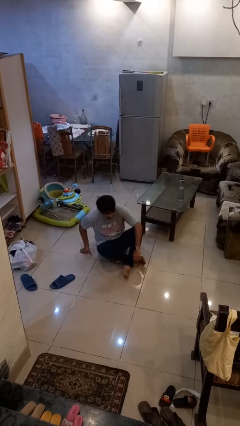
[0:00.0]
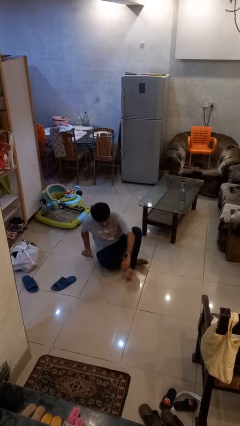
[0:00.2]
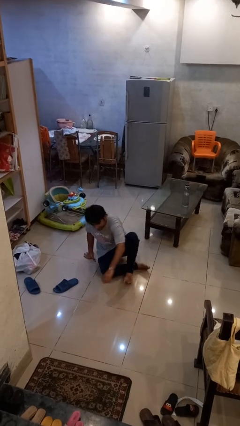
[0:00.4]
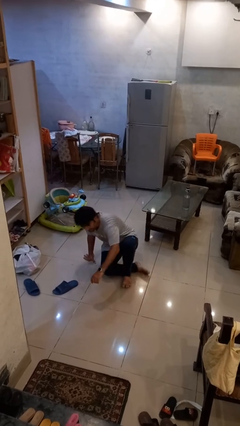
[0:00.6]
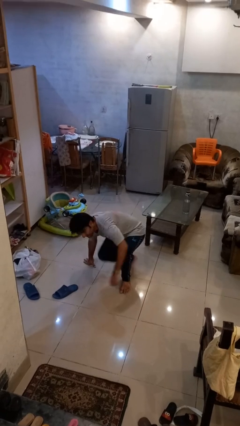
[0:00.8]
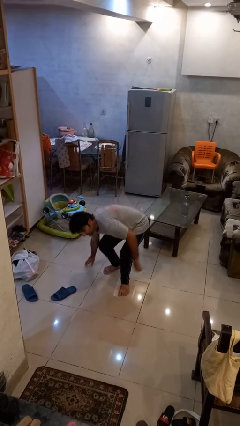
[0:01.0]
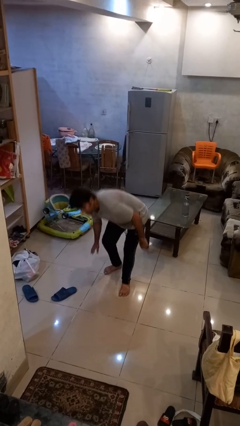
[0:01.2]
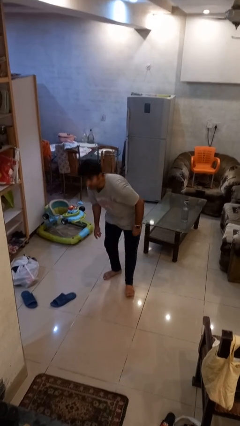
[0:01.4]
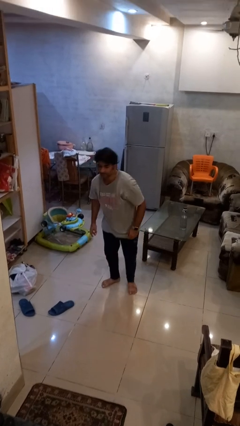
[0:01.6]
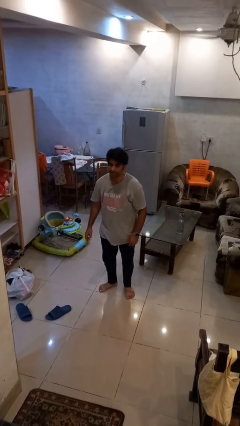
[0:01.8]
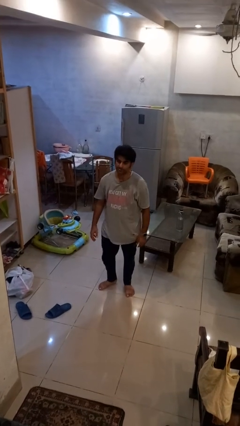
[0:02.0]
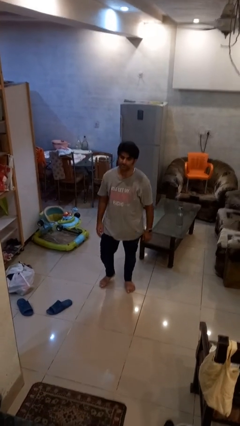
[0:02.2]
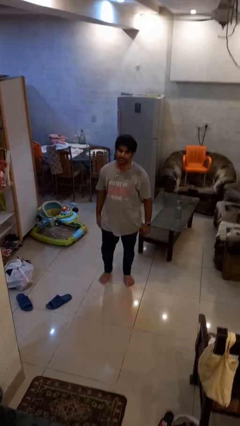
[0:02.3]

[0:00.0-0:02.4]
person stands up from floor

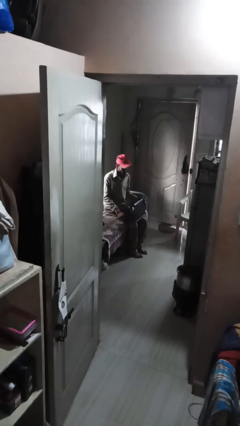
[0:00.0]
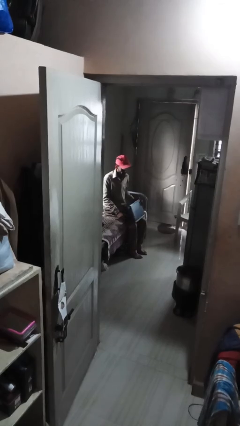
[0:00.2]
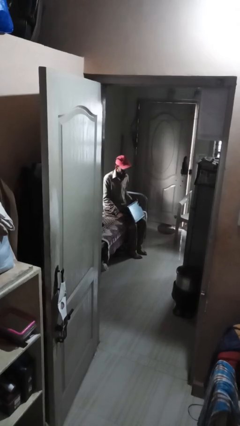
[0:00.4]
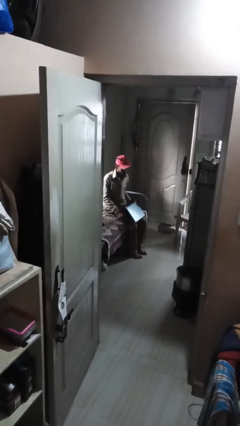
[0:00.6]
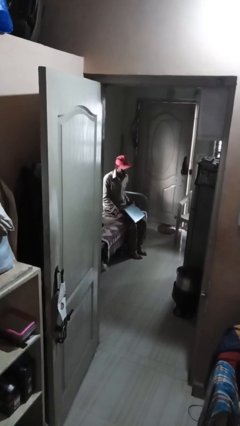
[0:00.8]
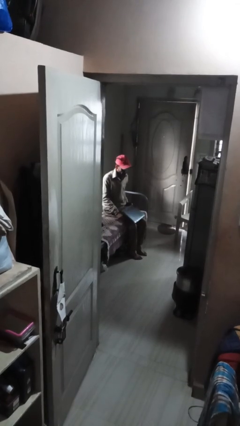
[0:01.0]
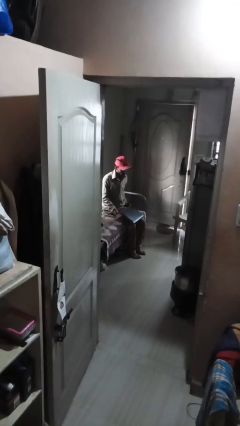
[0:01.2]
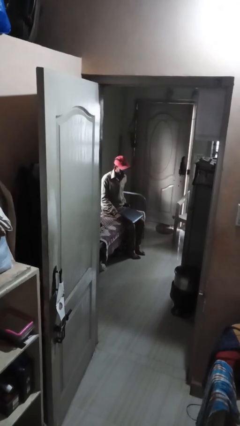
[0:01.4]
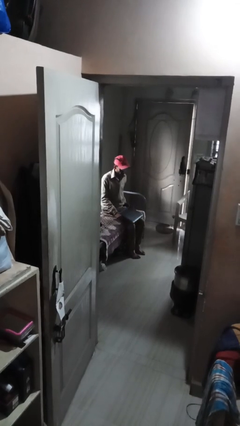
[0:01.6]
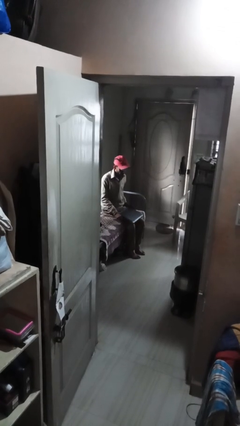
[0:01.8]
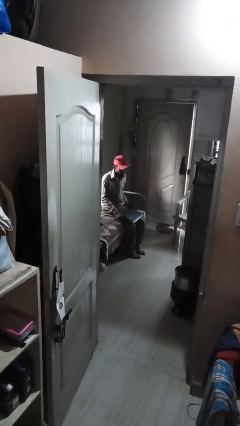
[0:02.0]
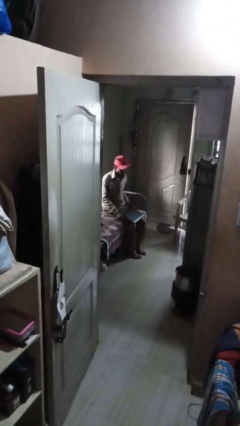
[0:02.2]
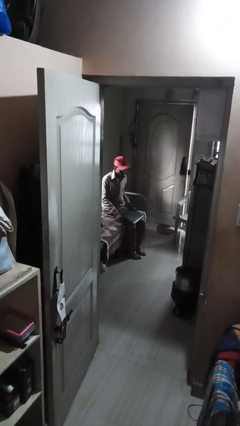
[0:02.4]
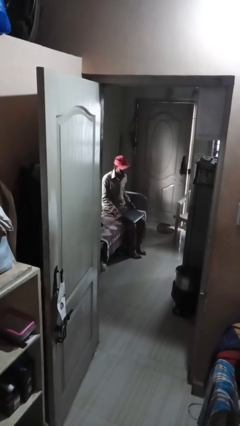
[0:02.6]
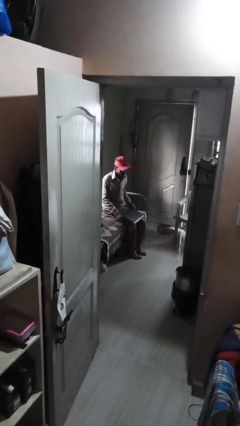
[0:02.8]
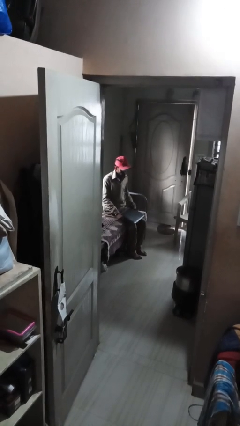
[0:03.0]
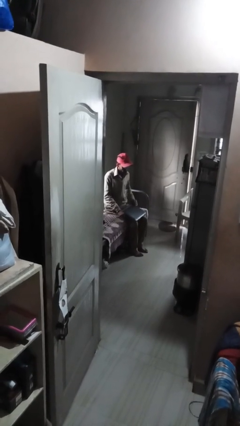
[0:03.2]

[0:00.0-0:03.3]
person closes laptop

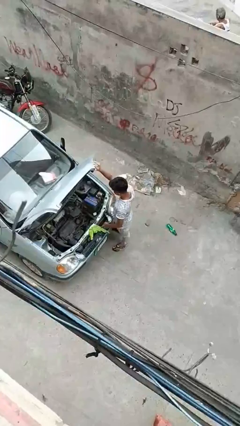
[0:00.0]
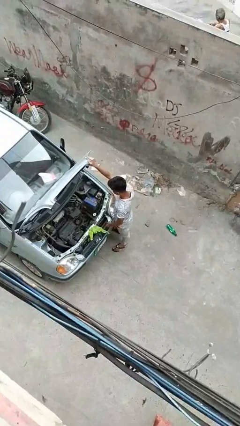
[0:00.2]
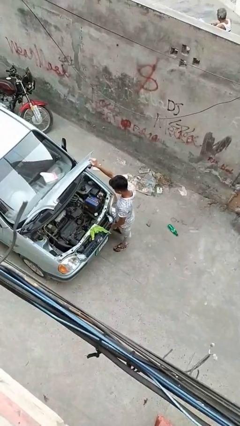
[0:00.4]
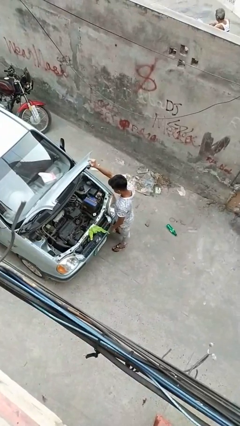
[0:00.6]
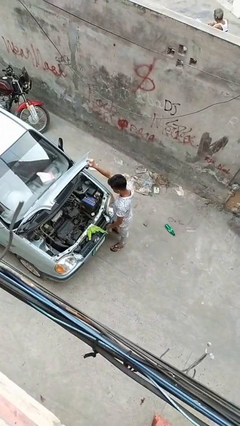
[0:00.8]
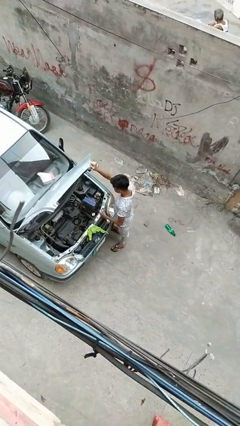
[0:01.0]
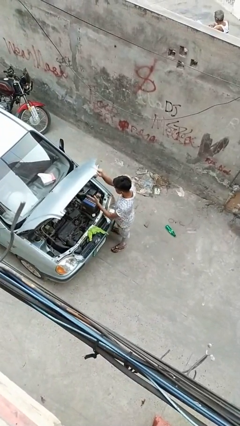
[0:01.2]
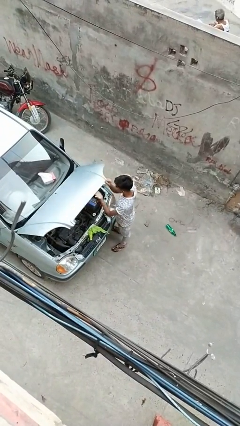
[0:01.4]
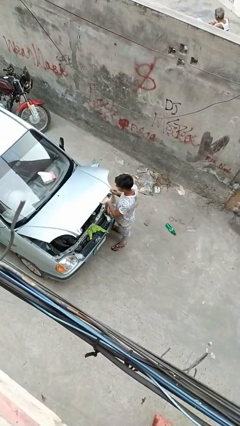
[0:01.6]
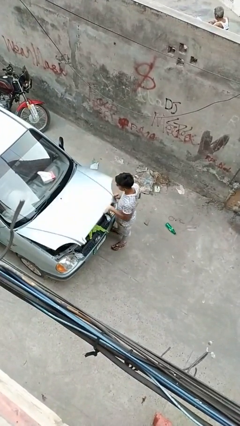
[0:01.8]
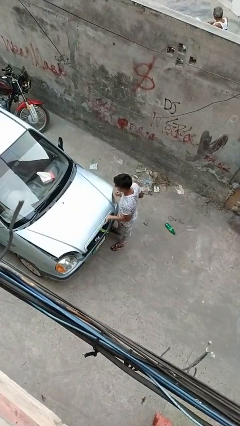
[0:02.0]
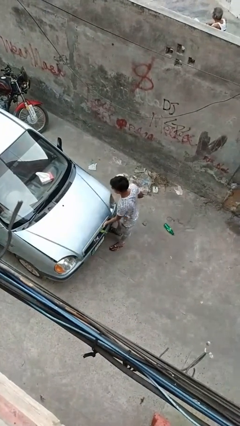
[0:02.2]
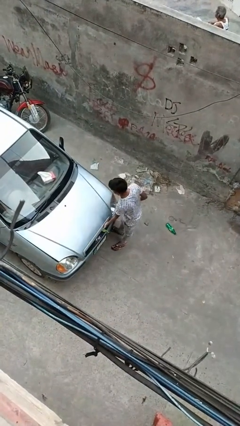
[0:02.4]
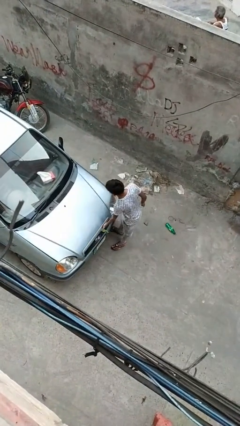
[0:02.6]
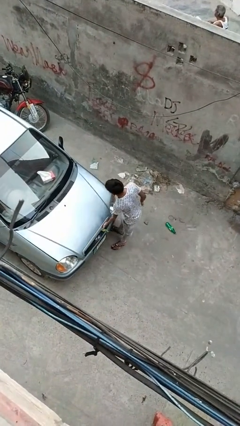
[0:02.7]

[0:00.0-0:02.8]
person closes car hood

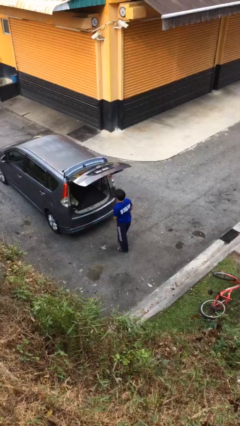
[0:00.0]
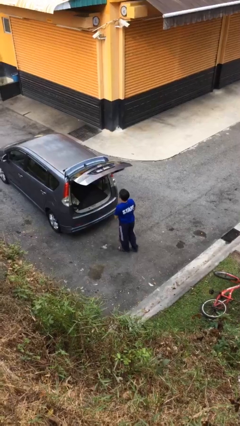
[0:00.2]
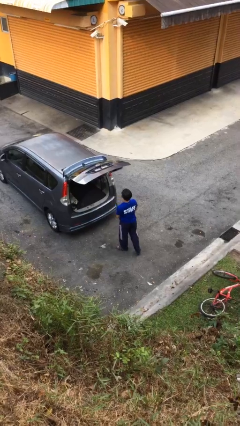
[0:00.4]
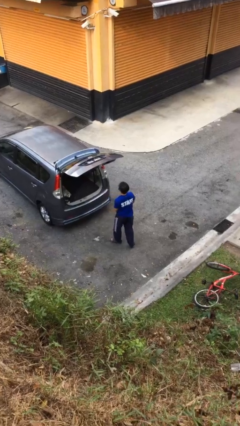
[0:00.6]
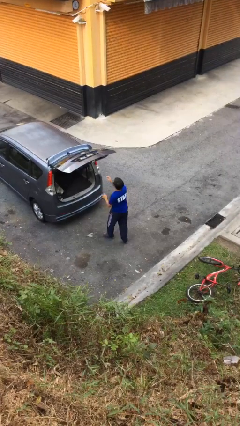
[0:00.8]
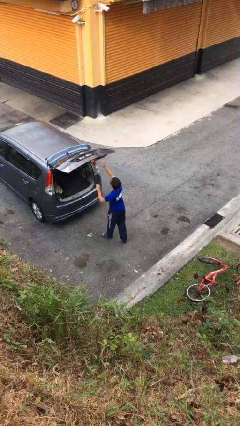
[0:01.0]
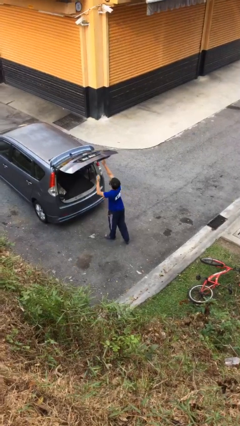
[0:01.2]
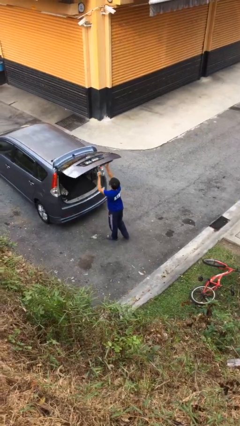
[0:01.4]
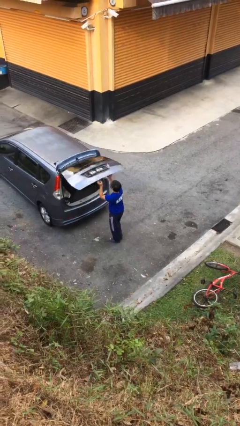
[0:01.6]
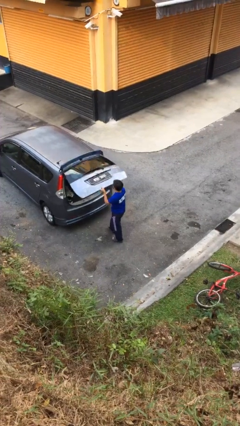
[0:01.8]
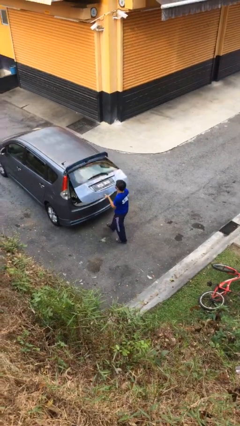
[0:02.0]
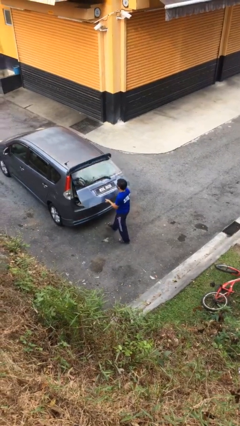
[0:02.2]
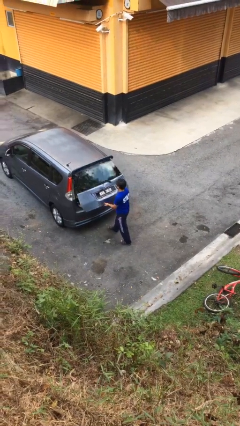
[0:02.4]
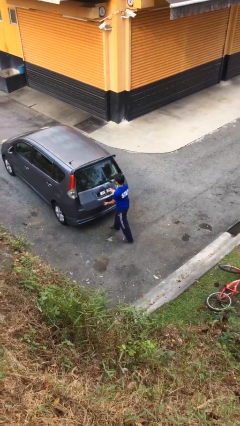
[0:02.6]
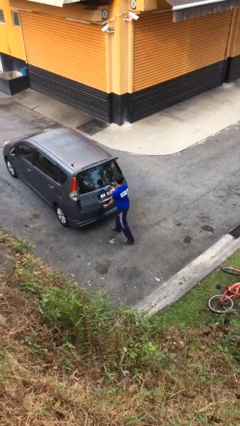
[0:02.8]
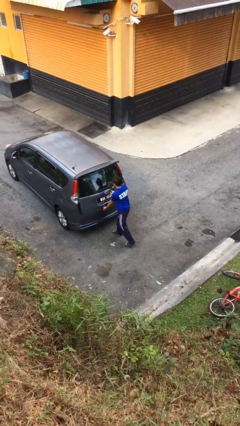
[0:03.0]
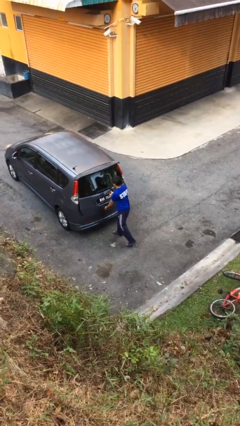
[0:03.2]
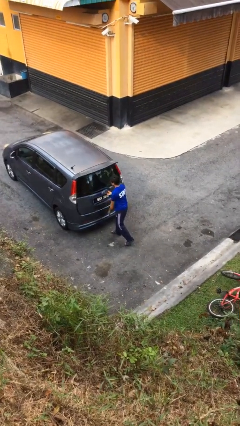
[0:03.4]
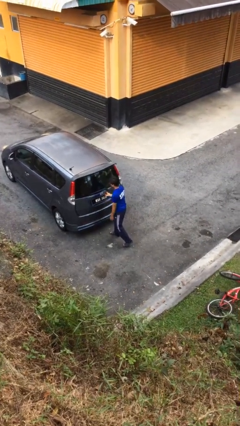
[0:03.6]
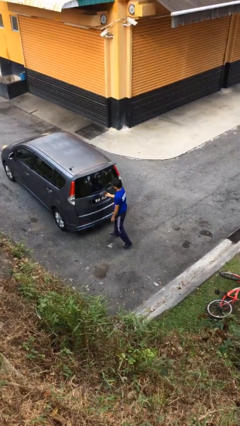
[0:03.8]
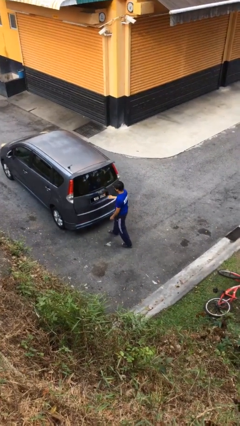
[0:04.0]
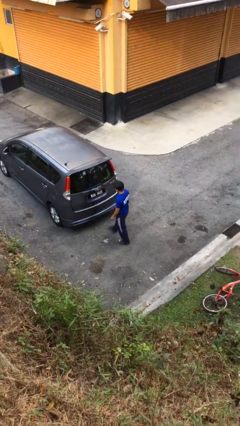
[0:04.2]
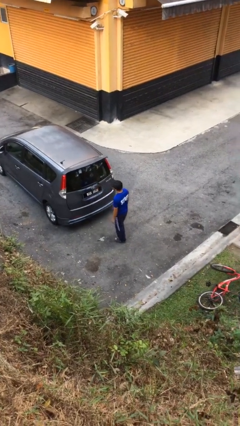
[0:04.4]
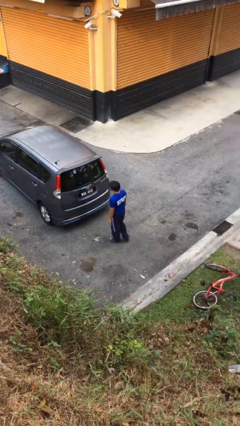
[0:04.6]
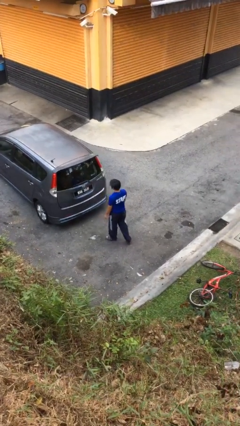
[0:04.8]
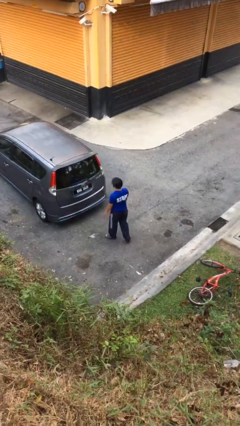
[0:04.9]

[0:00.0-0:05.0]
person closes car trunk

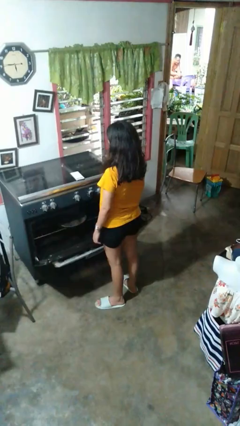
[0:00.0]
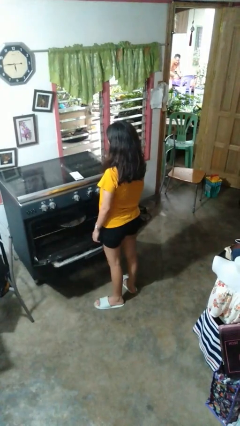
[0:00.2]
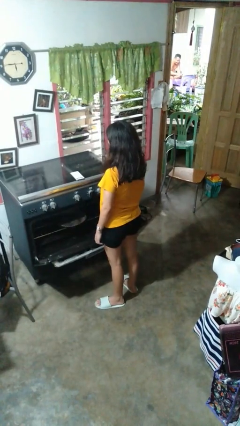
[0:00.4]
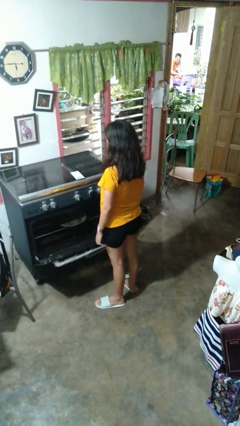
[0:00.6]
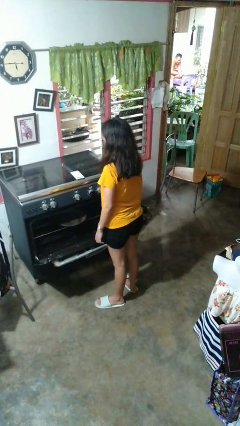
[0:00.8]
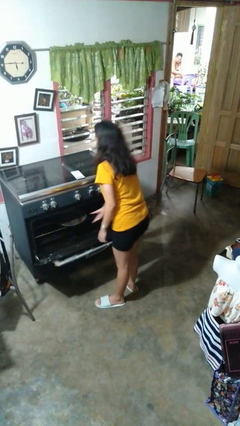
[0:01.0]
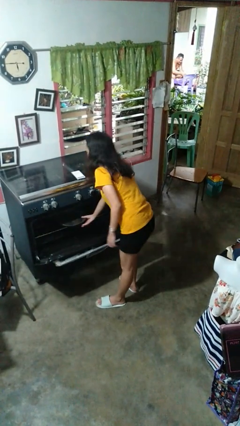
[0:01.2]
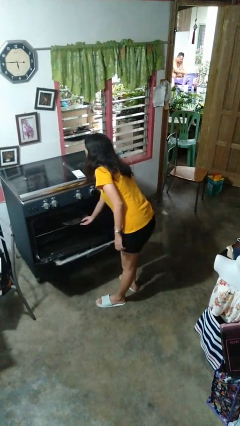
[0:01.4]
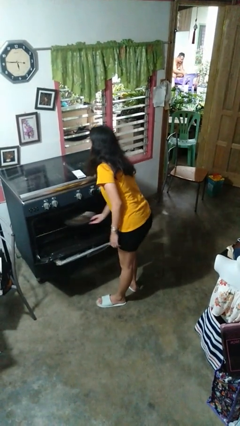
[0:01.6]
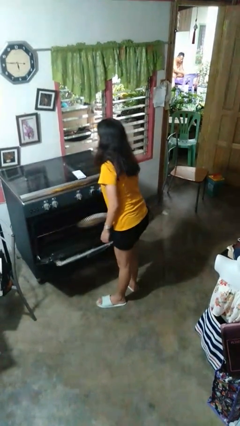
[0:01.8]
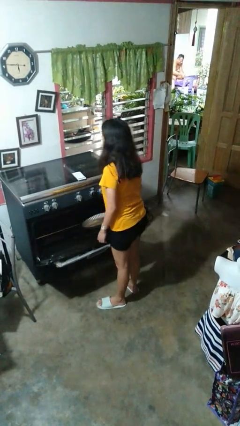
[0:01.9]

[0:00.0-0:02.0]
person takes object from oven

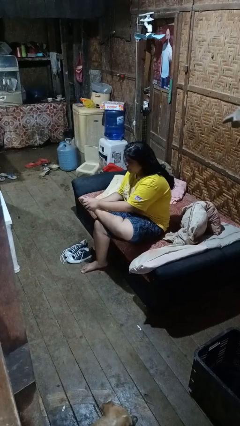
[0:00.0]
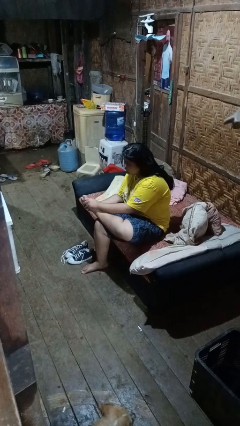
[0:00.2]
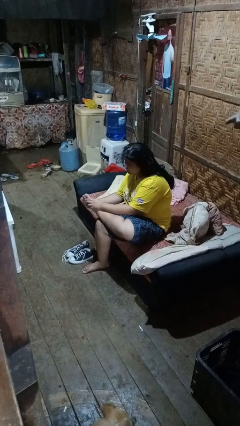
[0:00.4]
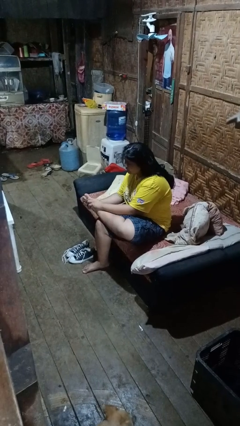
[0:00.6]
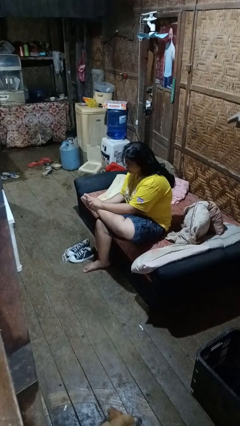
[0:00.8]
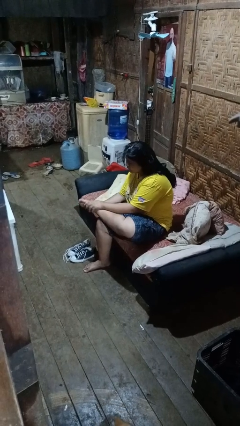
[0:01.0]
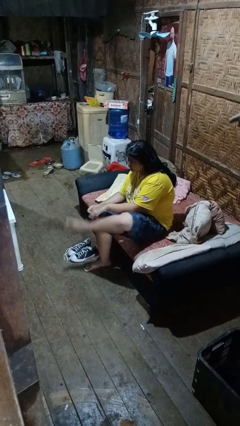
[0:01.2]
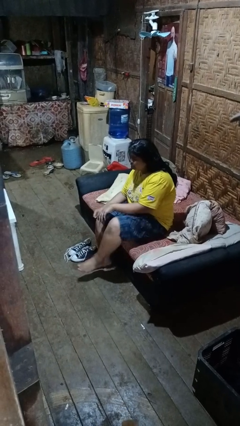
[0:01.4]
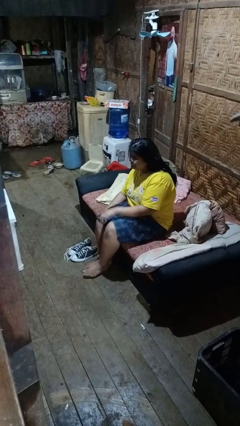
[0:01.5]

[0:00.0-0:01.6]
person rubs foot

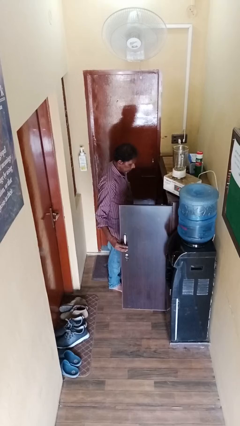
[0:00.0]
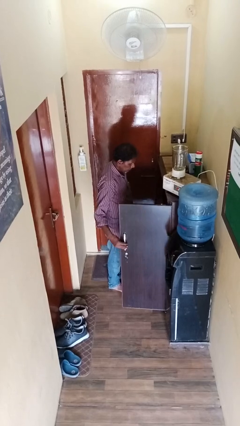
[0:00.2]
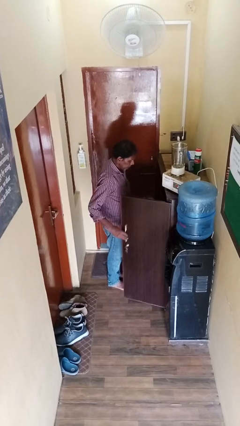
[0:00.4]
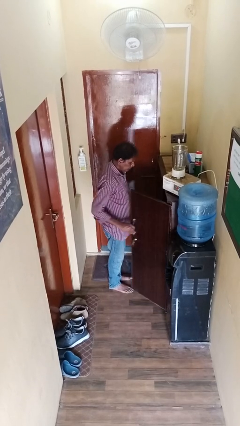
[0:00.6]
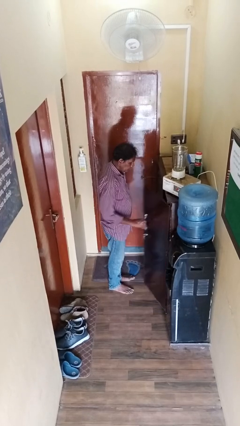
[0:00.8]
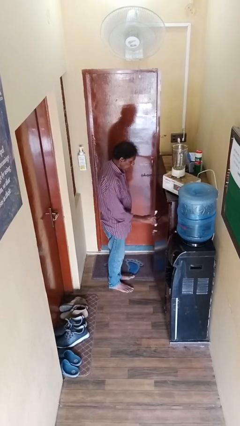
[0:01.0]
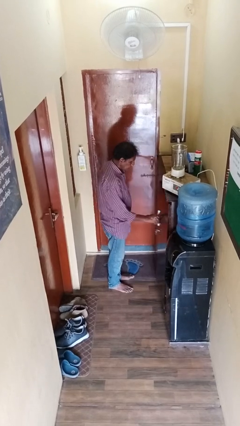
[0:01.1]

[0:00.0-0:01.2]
person closes cabinet
